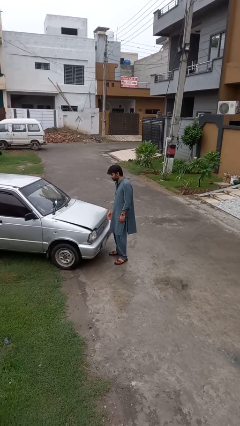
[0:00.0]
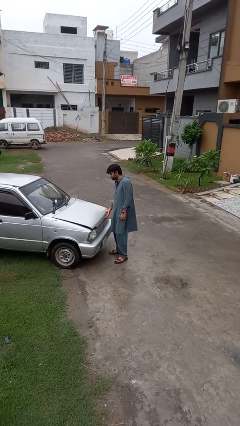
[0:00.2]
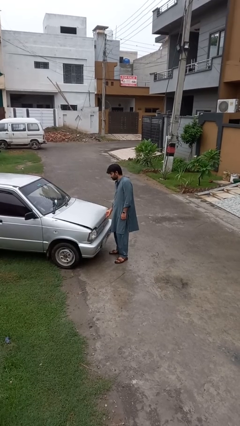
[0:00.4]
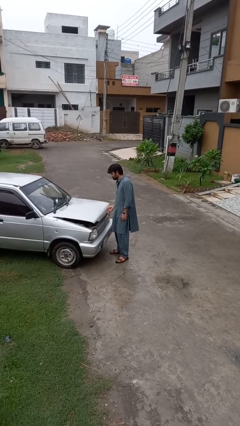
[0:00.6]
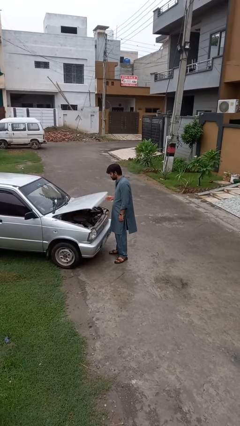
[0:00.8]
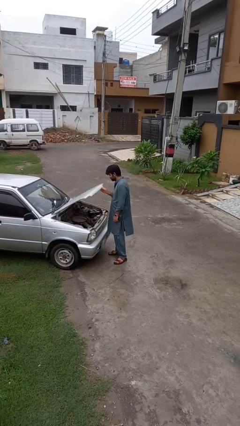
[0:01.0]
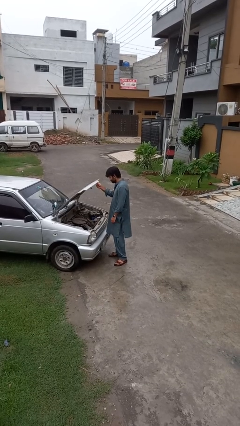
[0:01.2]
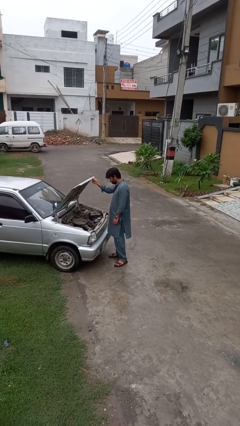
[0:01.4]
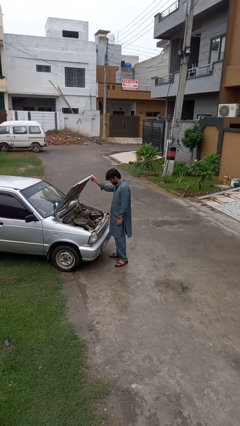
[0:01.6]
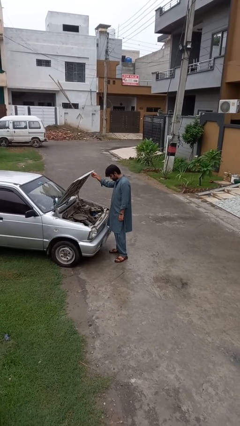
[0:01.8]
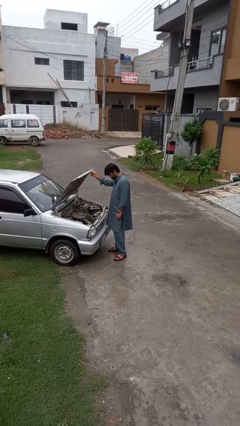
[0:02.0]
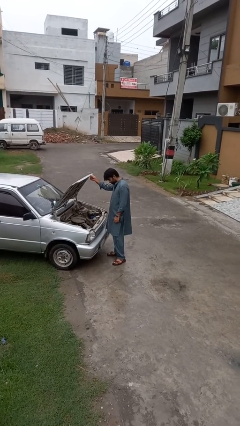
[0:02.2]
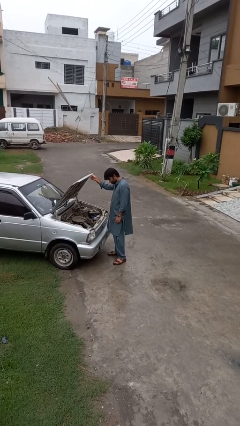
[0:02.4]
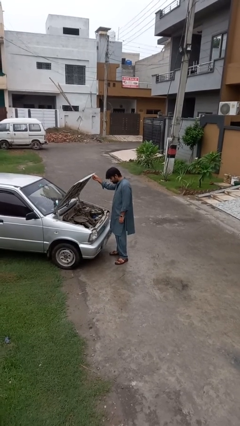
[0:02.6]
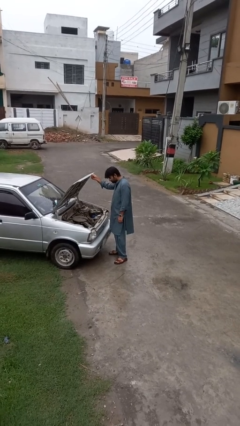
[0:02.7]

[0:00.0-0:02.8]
person opens car hood

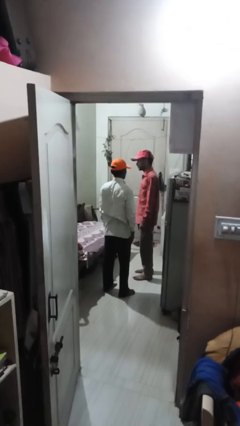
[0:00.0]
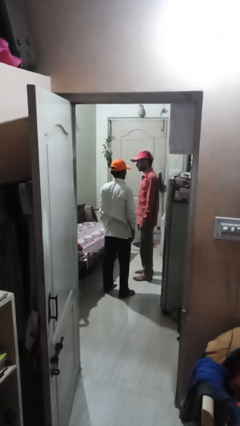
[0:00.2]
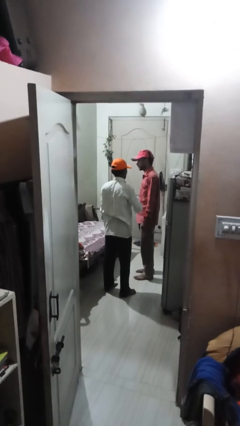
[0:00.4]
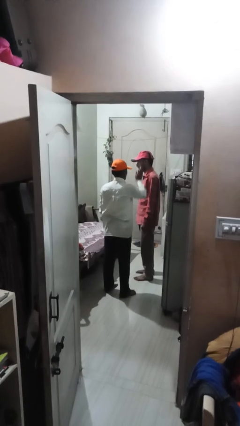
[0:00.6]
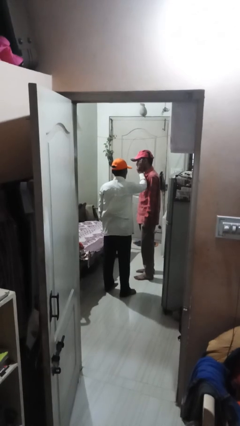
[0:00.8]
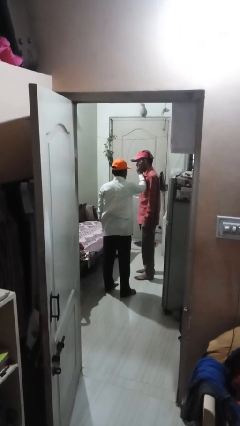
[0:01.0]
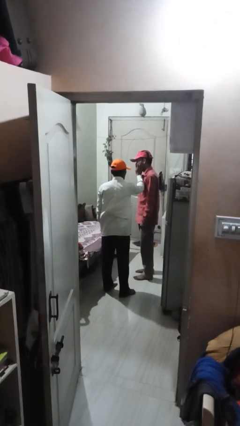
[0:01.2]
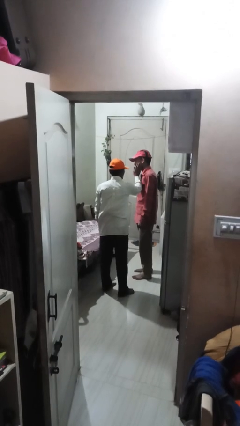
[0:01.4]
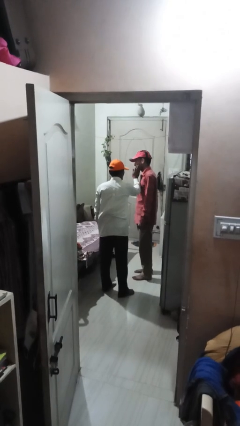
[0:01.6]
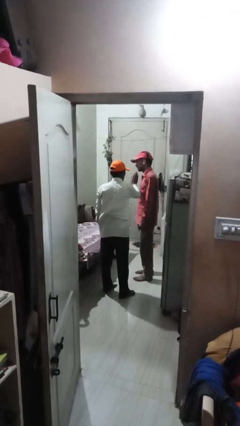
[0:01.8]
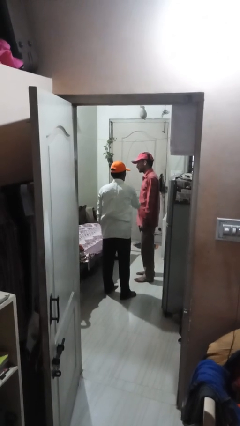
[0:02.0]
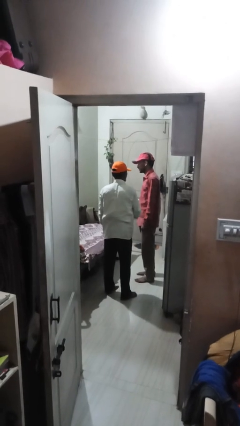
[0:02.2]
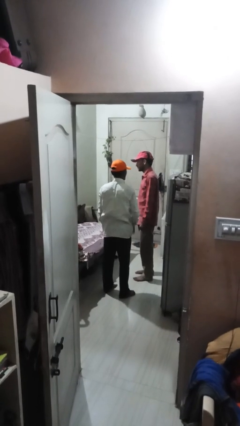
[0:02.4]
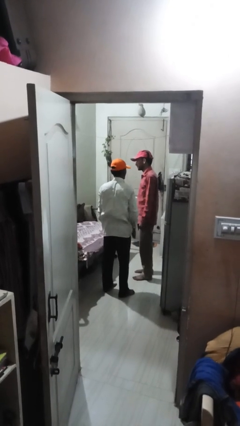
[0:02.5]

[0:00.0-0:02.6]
person touches face of person

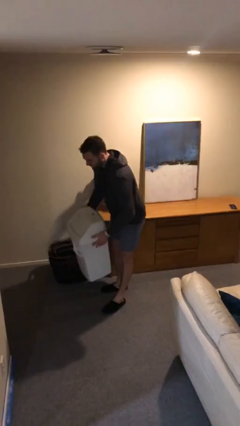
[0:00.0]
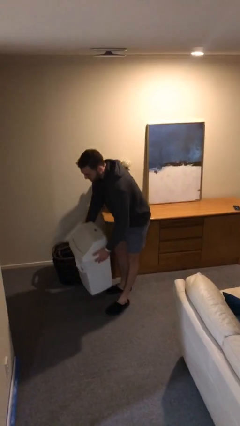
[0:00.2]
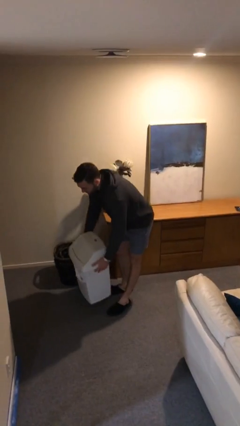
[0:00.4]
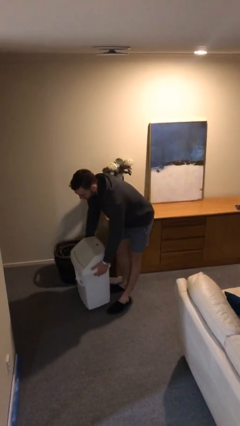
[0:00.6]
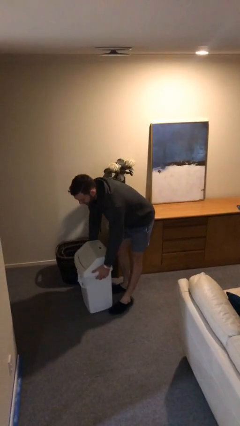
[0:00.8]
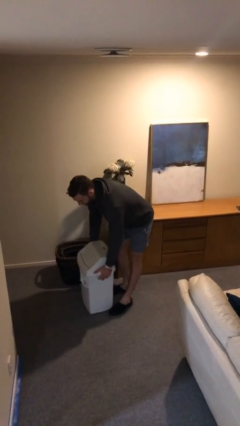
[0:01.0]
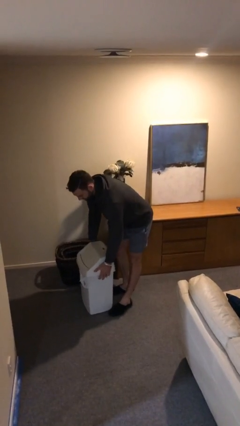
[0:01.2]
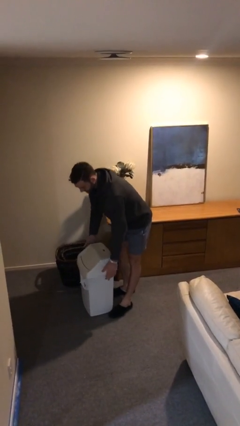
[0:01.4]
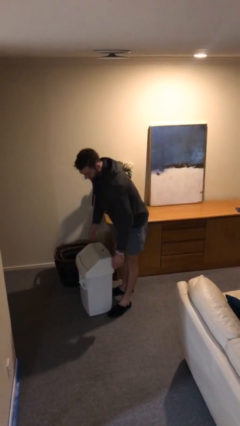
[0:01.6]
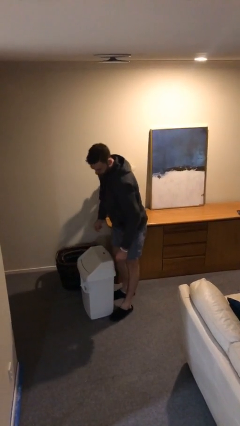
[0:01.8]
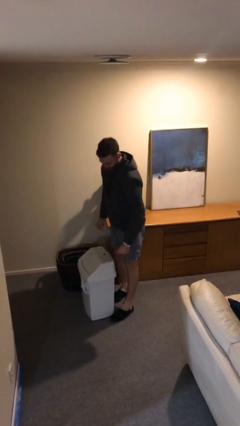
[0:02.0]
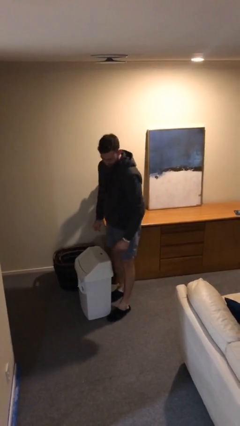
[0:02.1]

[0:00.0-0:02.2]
person puts down object on floor

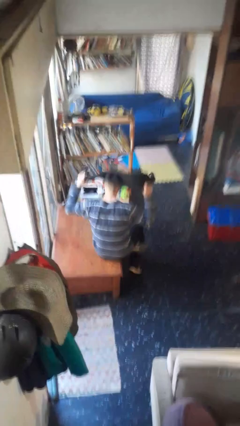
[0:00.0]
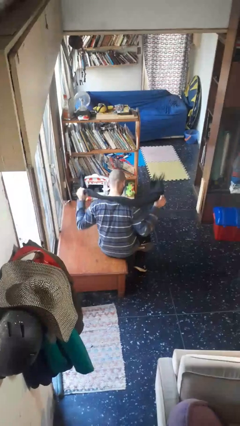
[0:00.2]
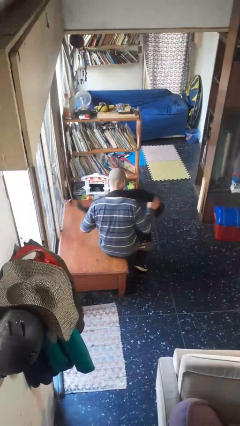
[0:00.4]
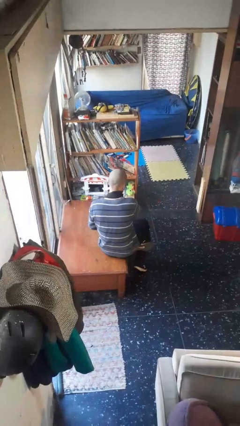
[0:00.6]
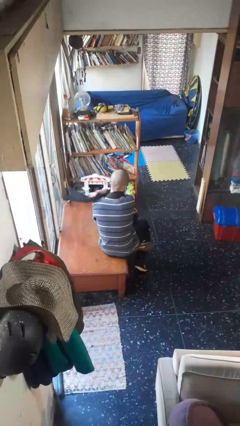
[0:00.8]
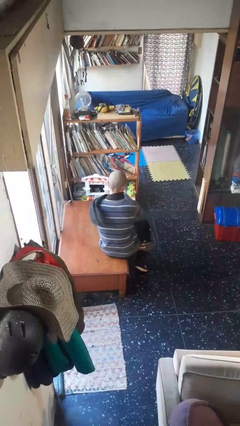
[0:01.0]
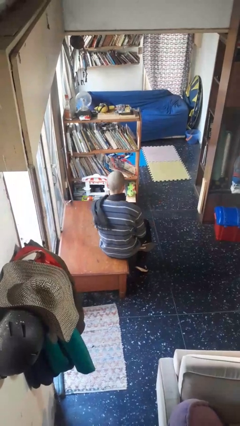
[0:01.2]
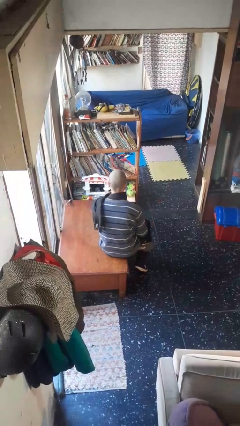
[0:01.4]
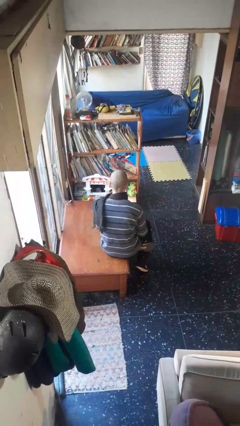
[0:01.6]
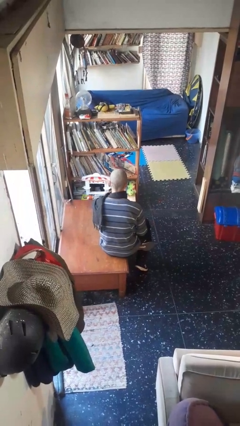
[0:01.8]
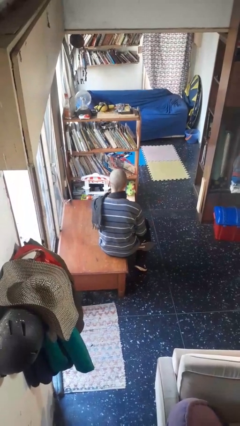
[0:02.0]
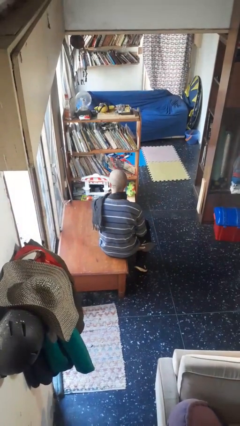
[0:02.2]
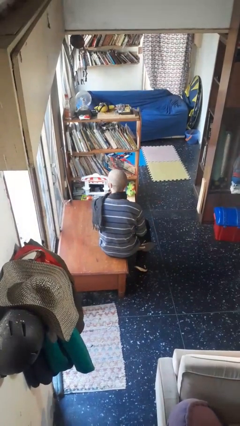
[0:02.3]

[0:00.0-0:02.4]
person puts on scarf

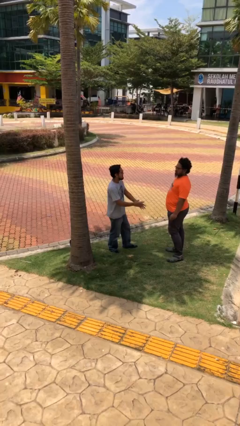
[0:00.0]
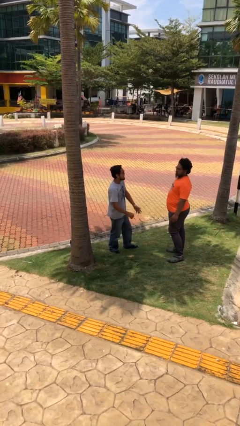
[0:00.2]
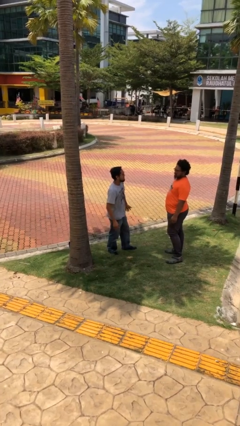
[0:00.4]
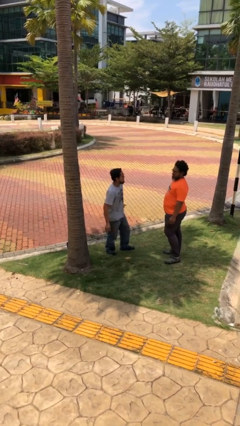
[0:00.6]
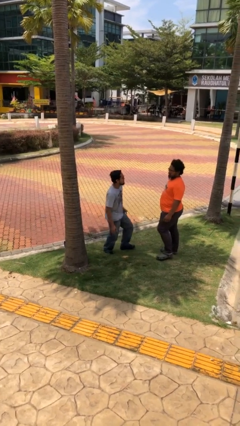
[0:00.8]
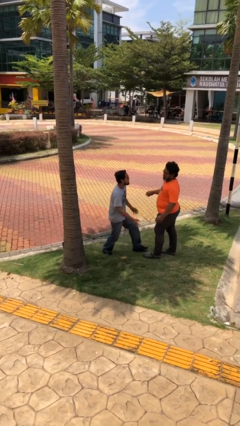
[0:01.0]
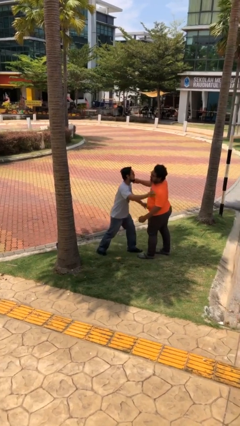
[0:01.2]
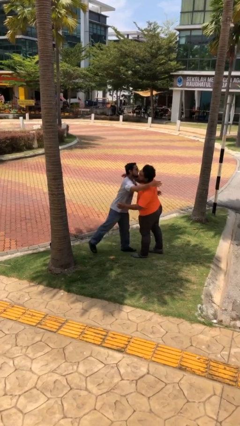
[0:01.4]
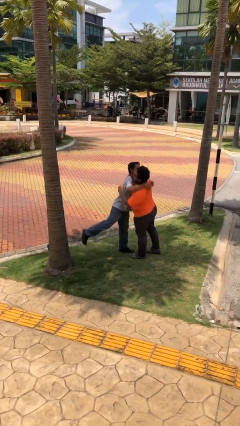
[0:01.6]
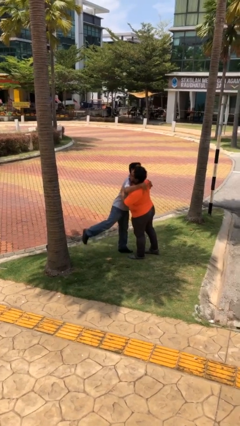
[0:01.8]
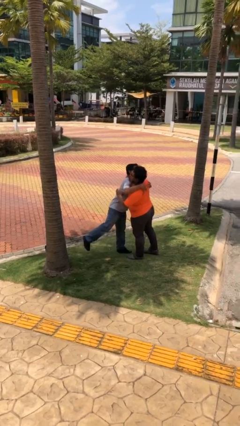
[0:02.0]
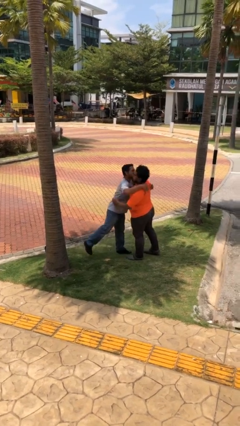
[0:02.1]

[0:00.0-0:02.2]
person embraces person

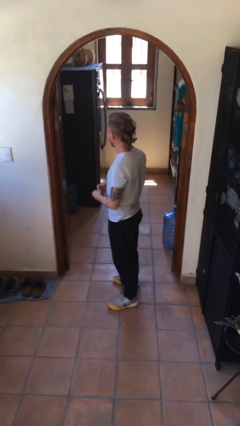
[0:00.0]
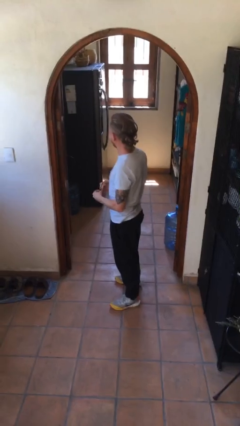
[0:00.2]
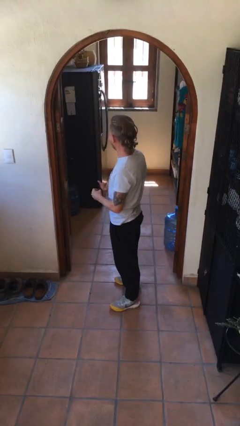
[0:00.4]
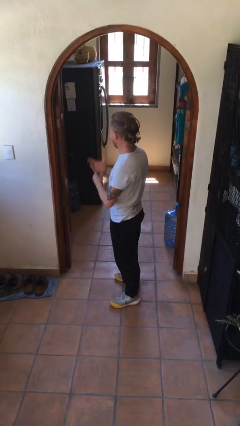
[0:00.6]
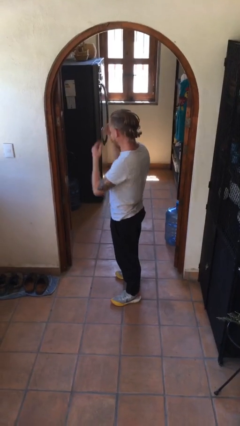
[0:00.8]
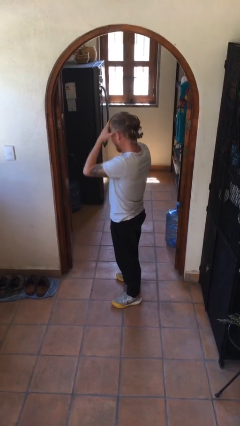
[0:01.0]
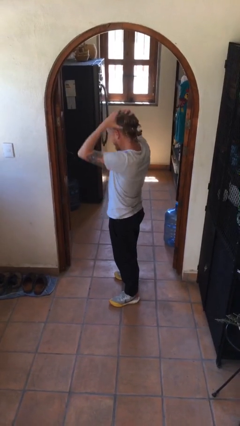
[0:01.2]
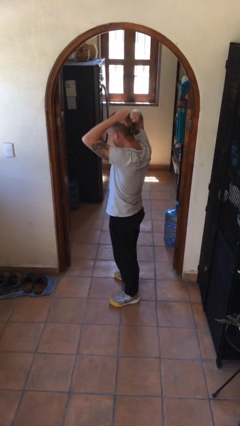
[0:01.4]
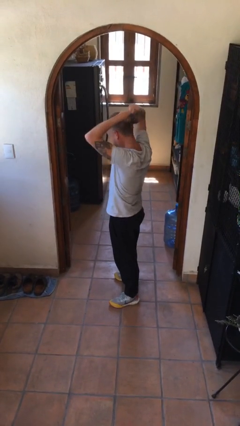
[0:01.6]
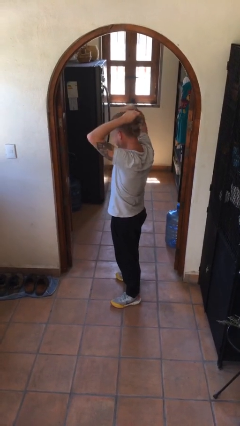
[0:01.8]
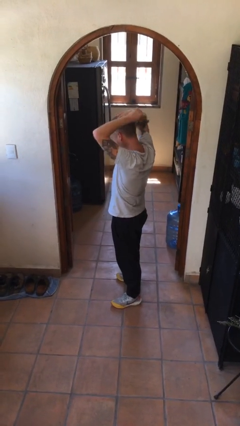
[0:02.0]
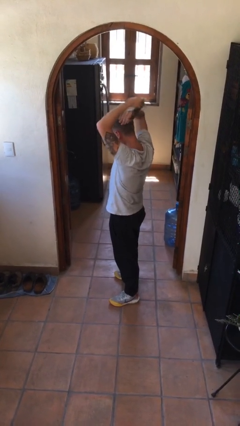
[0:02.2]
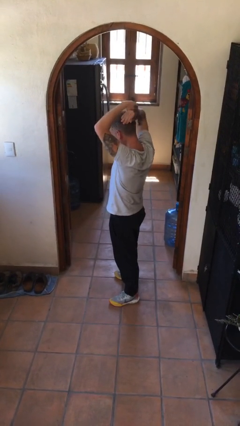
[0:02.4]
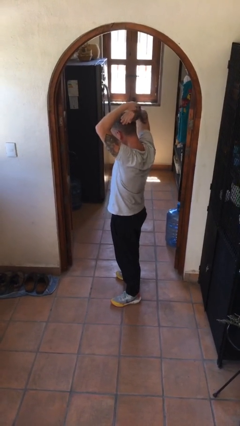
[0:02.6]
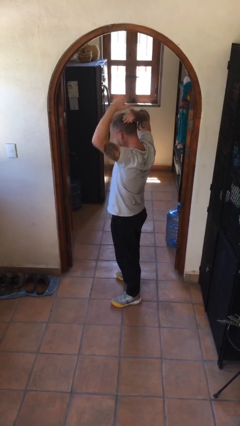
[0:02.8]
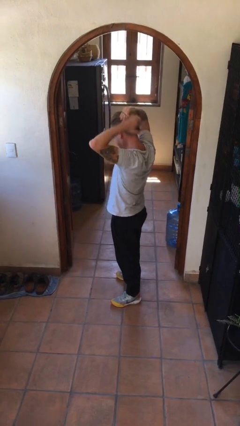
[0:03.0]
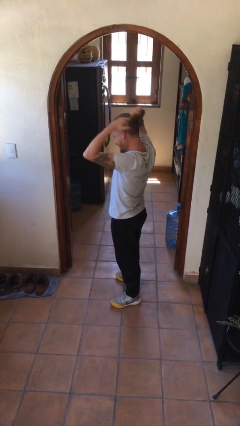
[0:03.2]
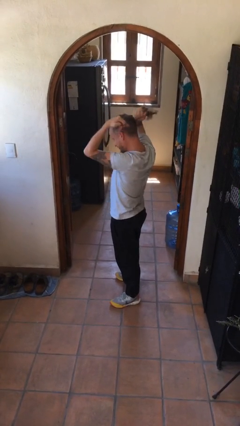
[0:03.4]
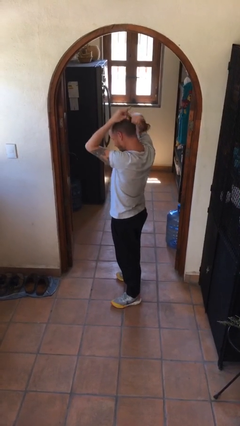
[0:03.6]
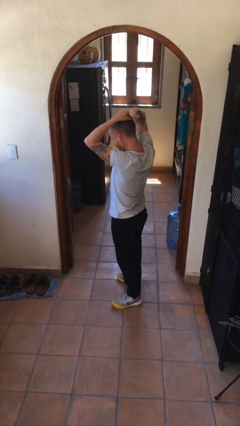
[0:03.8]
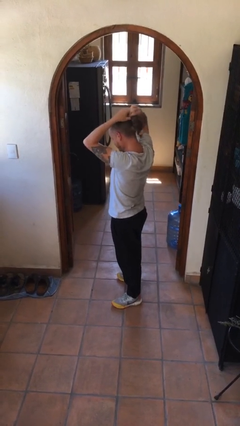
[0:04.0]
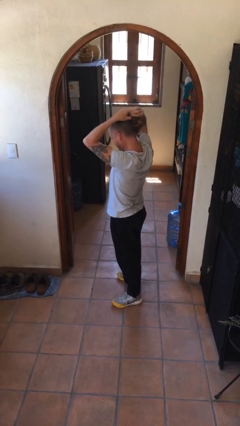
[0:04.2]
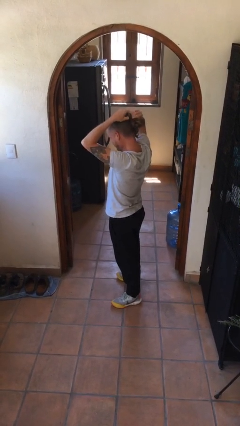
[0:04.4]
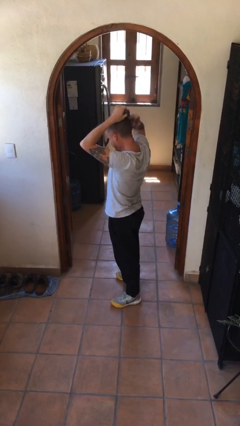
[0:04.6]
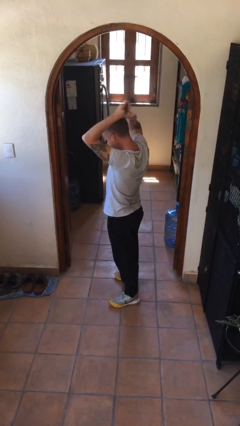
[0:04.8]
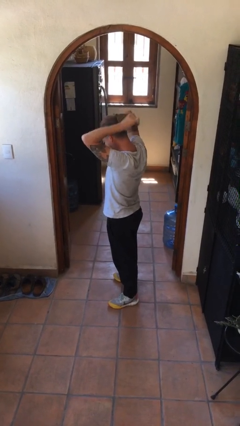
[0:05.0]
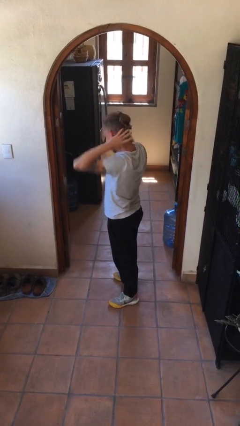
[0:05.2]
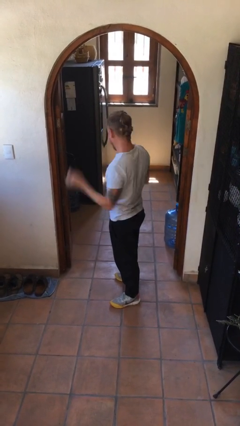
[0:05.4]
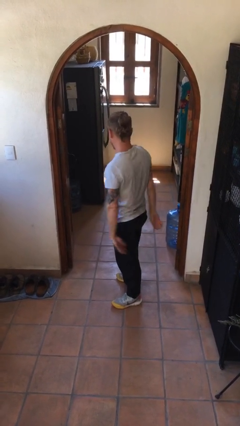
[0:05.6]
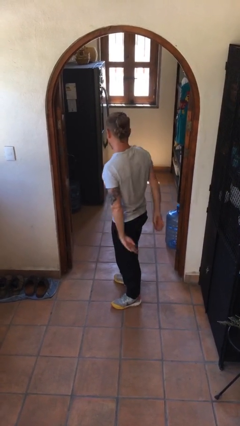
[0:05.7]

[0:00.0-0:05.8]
person puts hair in ponytail
